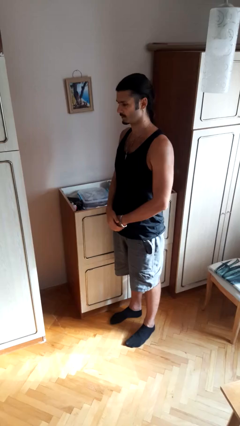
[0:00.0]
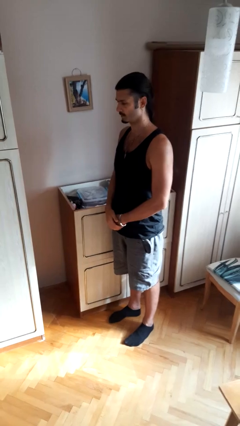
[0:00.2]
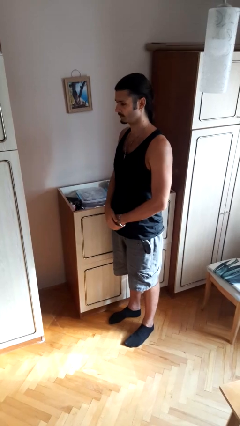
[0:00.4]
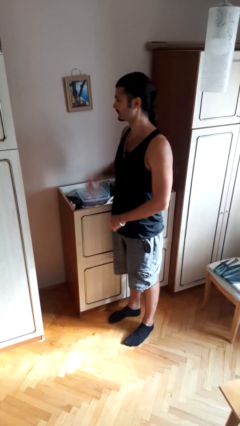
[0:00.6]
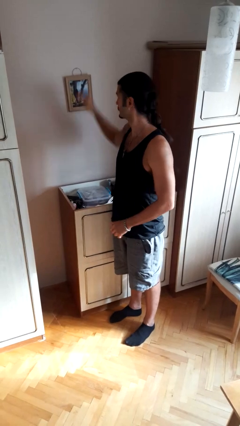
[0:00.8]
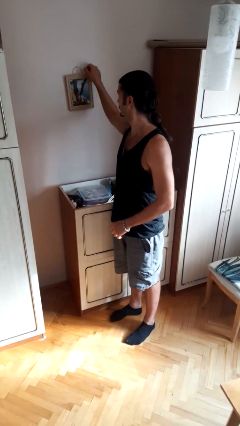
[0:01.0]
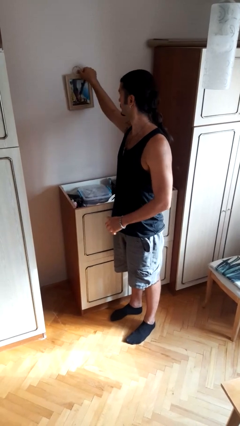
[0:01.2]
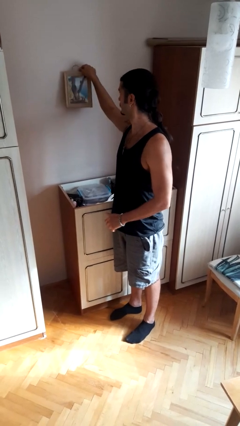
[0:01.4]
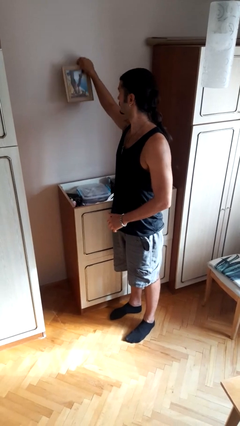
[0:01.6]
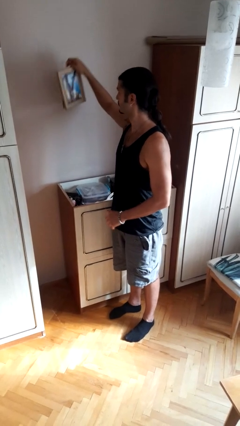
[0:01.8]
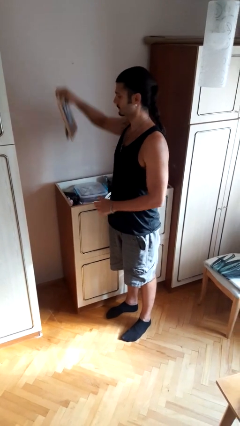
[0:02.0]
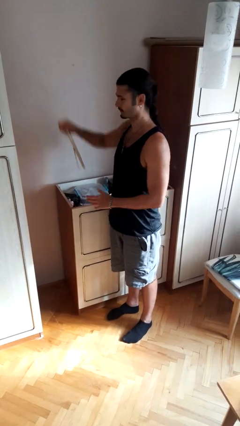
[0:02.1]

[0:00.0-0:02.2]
person takes down picture frame

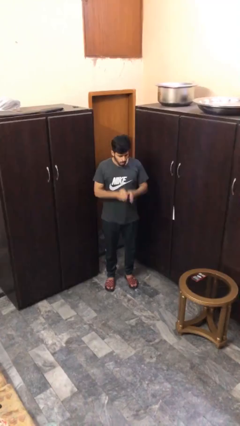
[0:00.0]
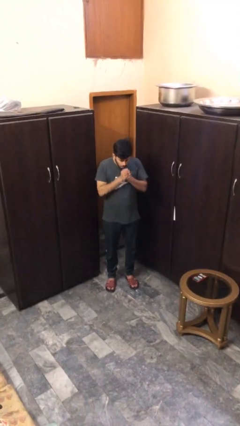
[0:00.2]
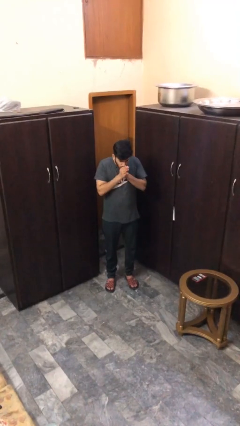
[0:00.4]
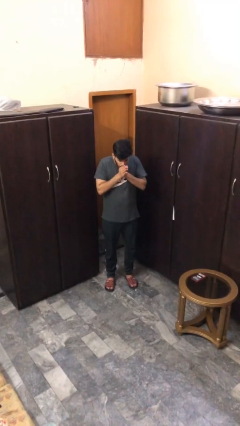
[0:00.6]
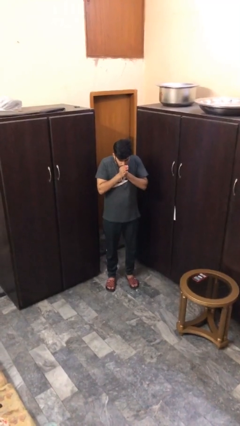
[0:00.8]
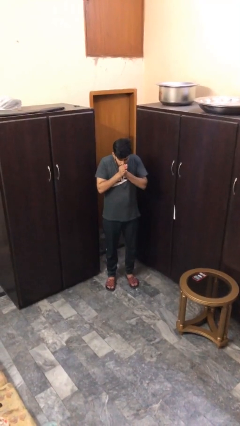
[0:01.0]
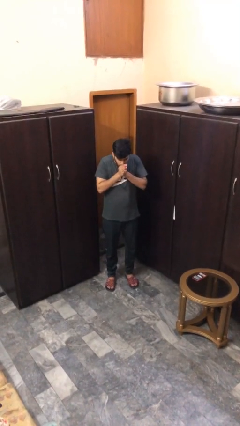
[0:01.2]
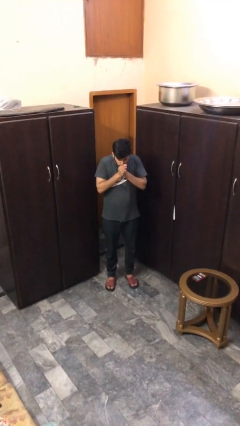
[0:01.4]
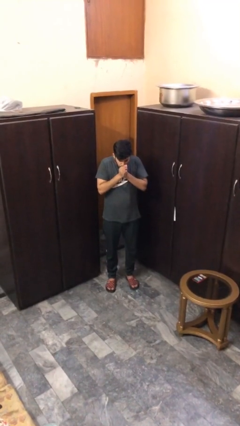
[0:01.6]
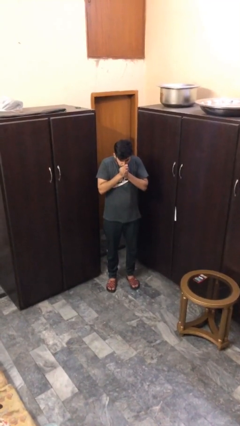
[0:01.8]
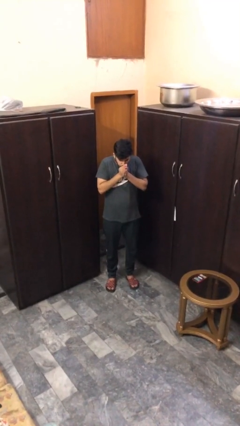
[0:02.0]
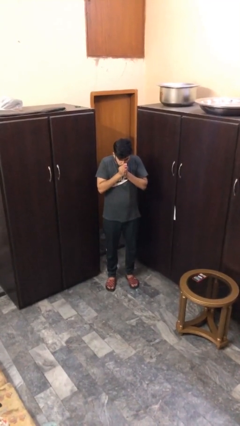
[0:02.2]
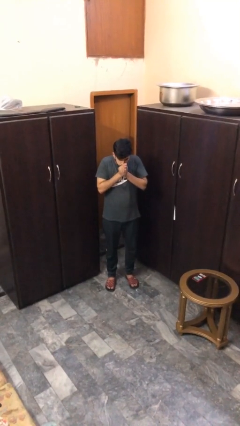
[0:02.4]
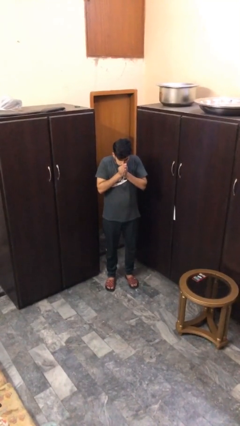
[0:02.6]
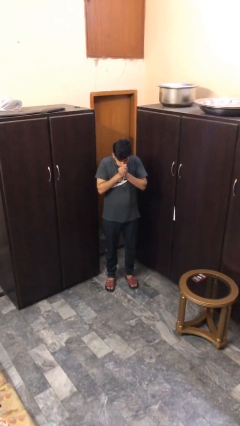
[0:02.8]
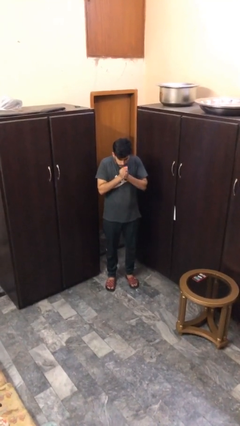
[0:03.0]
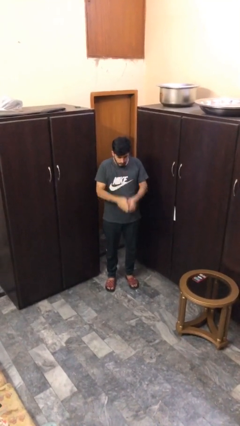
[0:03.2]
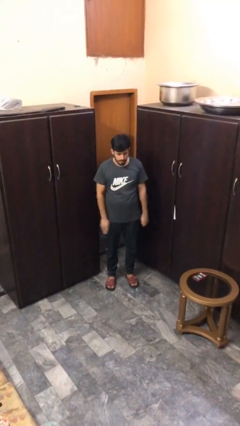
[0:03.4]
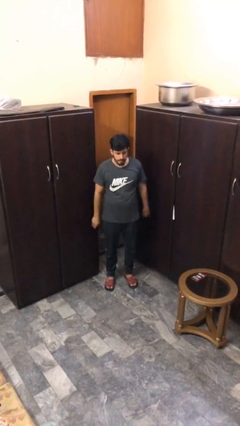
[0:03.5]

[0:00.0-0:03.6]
person blows into hands

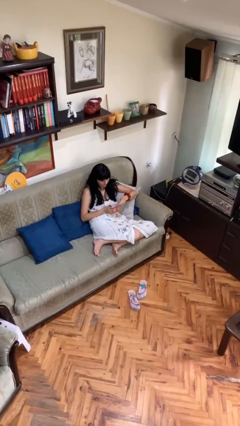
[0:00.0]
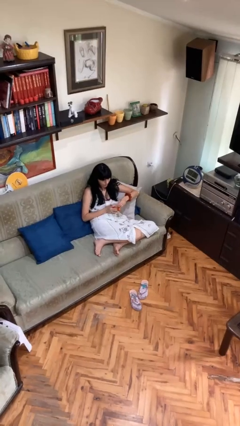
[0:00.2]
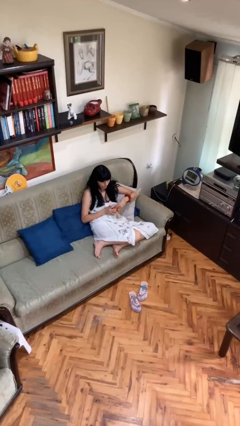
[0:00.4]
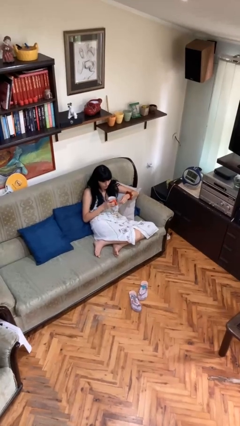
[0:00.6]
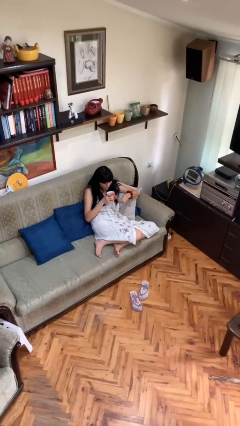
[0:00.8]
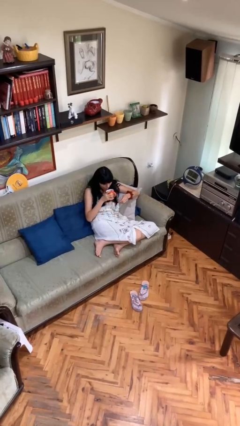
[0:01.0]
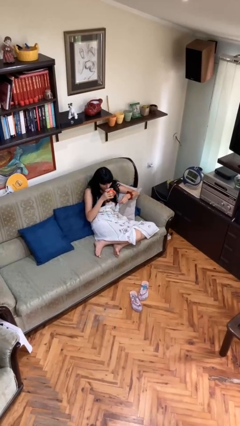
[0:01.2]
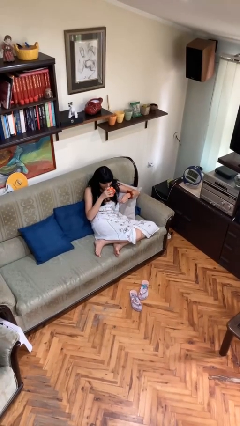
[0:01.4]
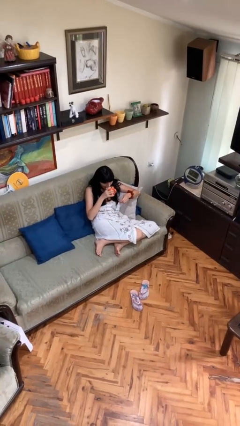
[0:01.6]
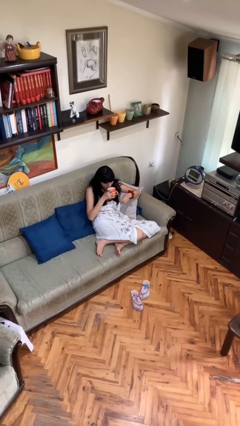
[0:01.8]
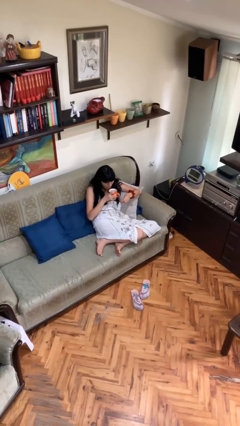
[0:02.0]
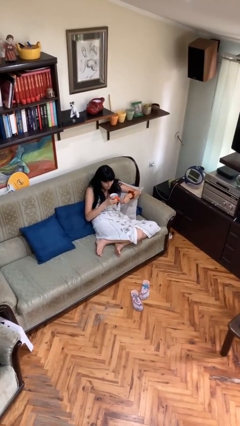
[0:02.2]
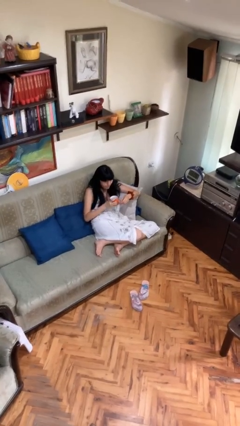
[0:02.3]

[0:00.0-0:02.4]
person drinks from mug

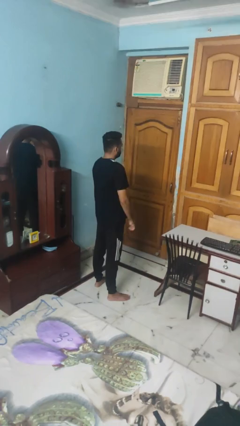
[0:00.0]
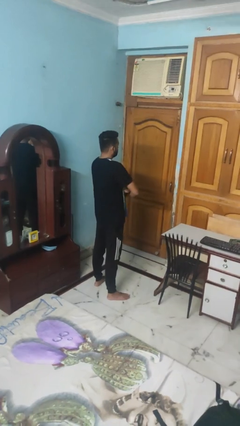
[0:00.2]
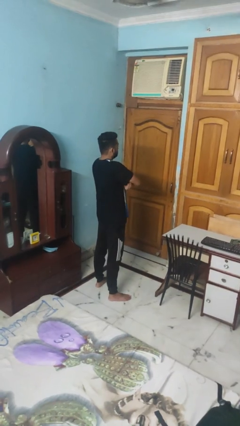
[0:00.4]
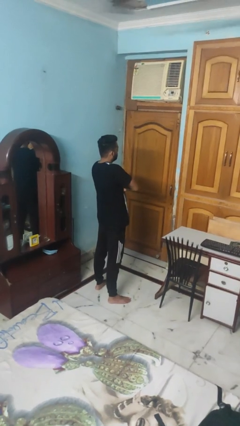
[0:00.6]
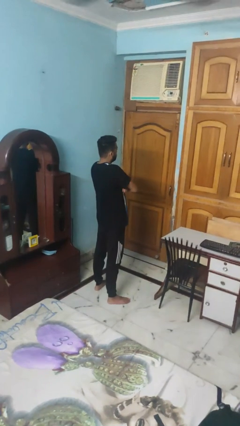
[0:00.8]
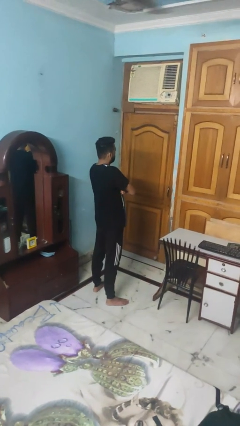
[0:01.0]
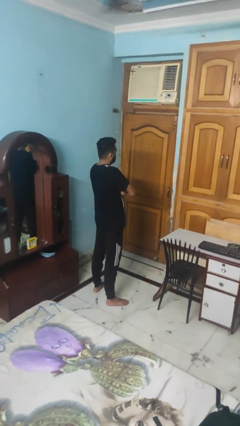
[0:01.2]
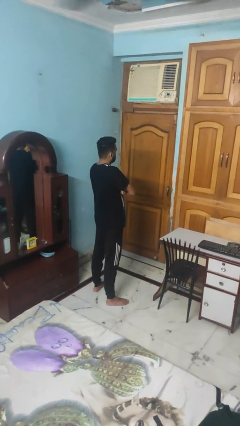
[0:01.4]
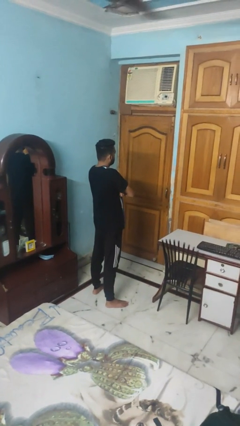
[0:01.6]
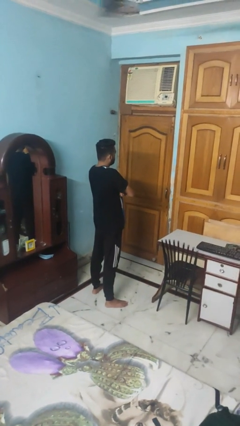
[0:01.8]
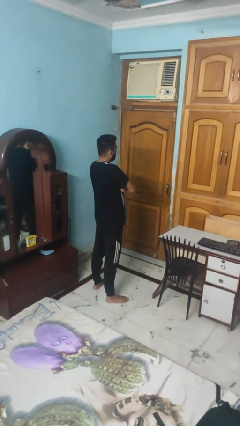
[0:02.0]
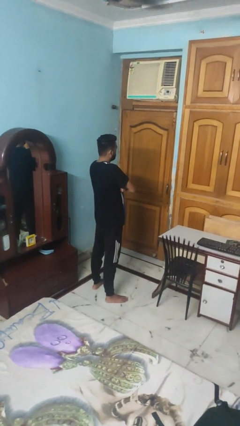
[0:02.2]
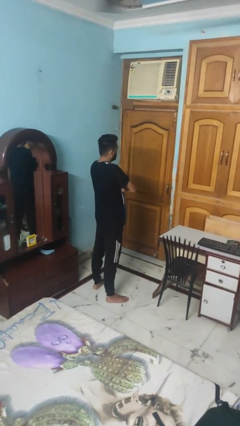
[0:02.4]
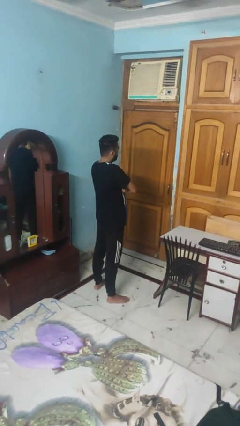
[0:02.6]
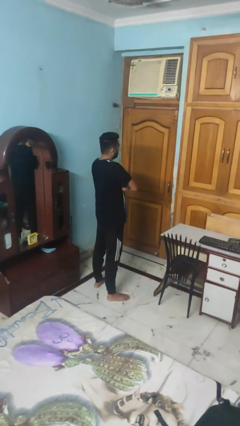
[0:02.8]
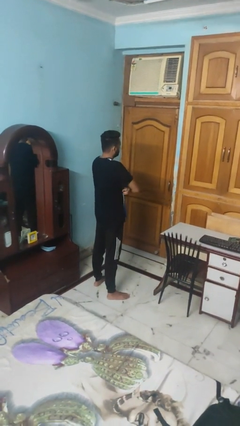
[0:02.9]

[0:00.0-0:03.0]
person crosses arms

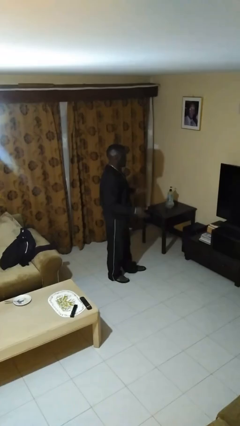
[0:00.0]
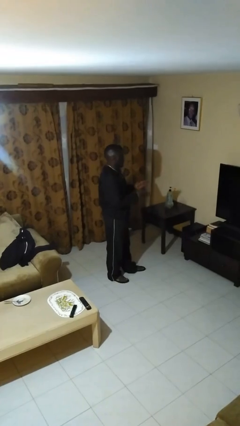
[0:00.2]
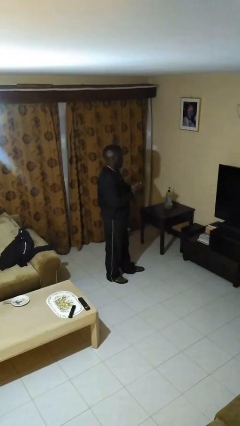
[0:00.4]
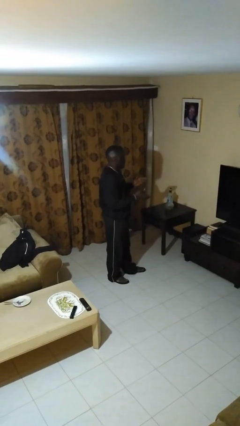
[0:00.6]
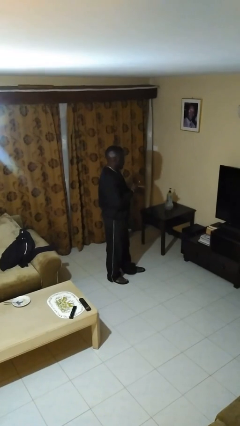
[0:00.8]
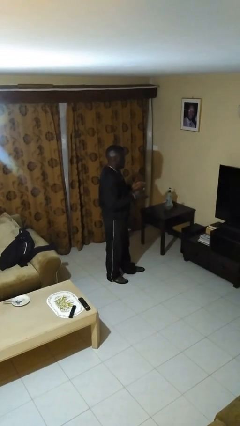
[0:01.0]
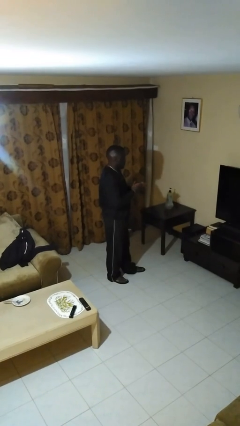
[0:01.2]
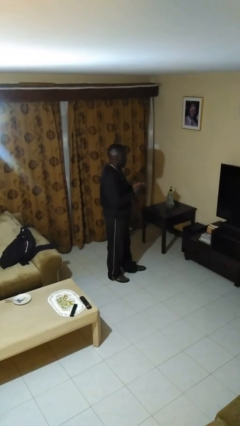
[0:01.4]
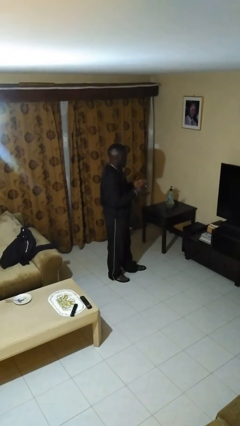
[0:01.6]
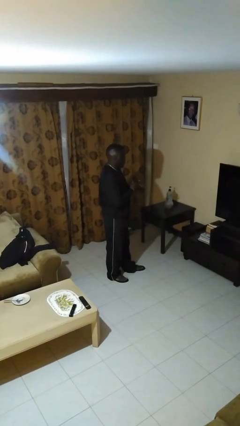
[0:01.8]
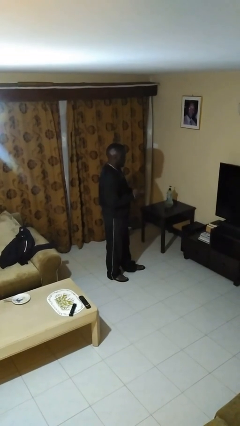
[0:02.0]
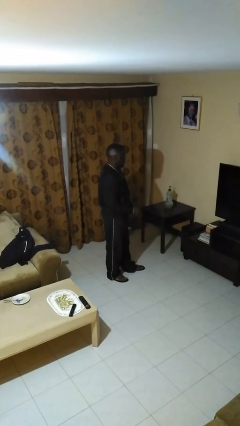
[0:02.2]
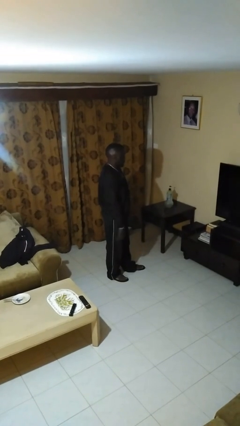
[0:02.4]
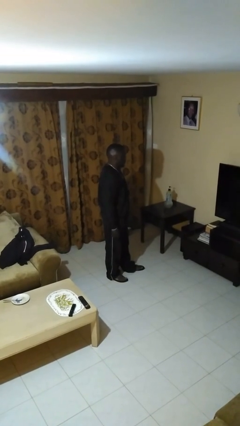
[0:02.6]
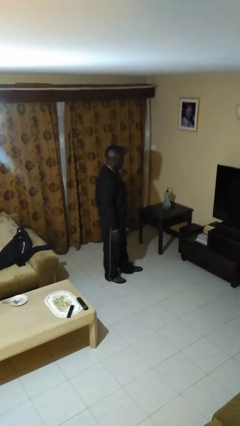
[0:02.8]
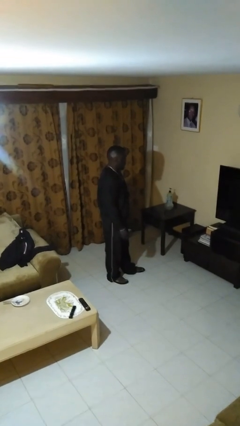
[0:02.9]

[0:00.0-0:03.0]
person claps hands

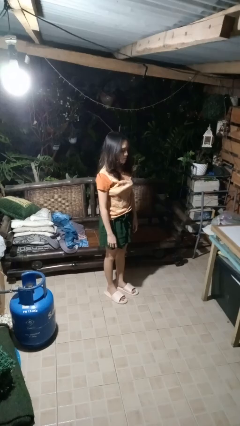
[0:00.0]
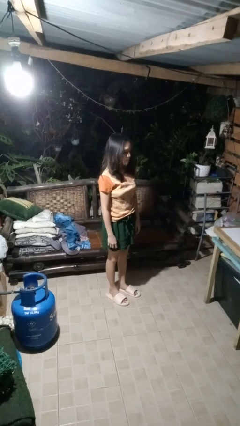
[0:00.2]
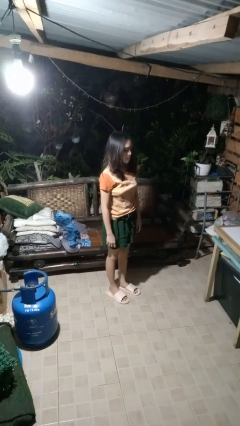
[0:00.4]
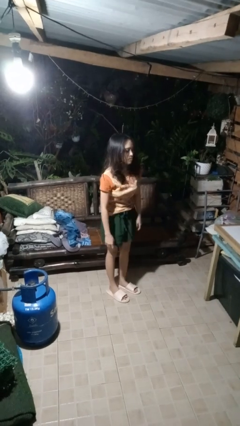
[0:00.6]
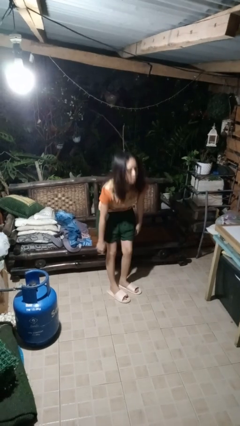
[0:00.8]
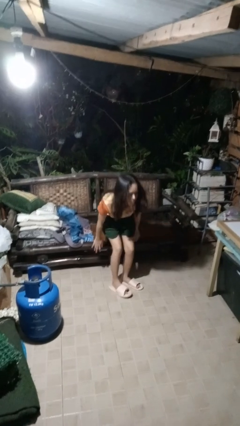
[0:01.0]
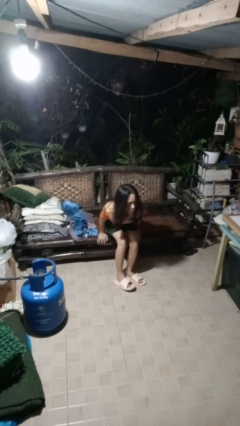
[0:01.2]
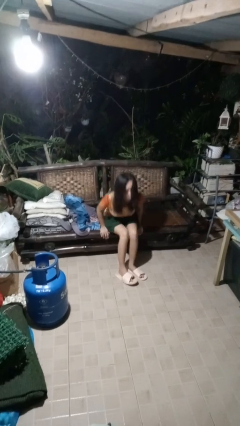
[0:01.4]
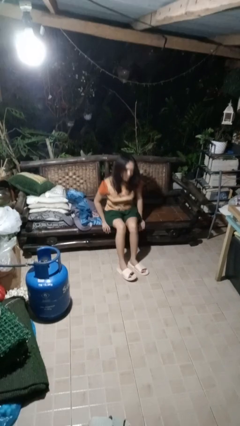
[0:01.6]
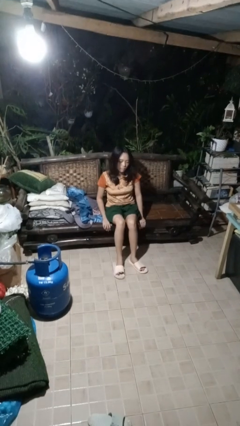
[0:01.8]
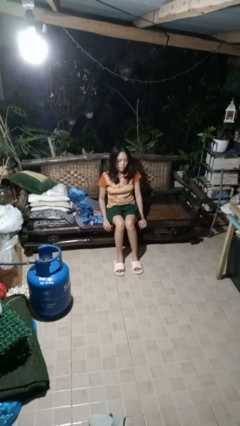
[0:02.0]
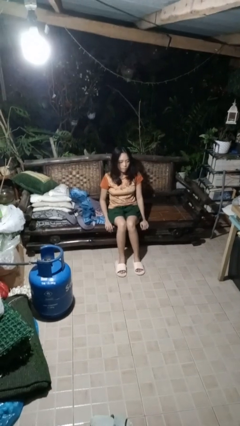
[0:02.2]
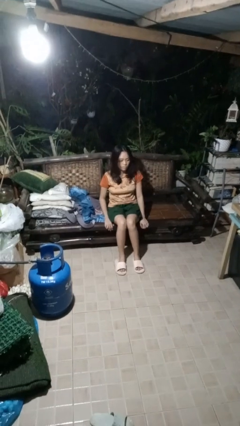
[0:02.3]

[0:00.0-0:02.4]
person sits down

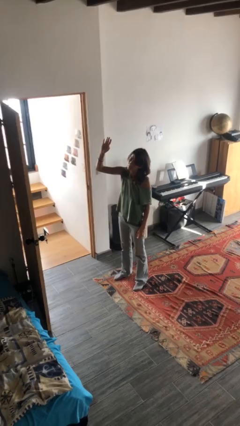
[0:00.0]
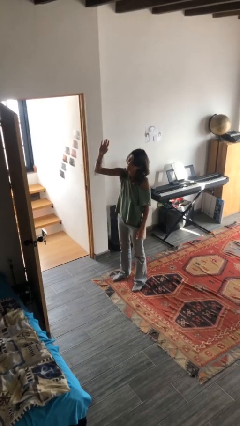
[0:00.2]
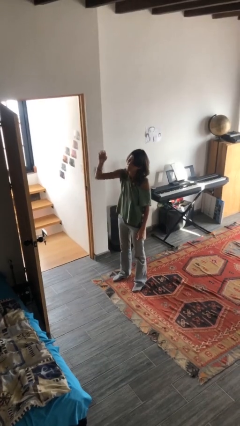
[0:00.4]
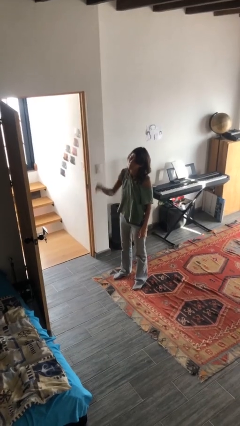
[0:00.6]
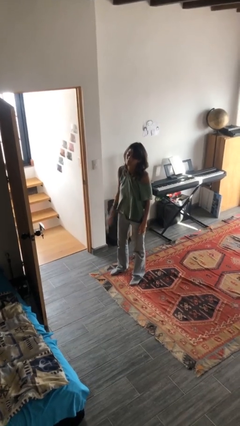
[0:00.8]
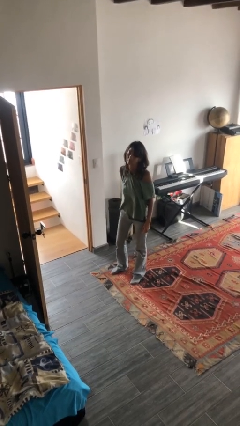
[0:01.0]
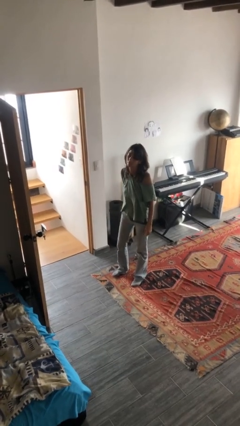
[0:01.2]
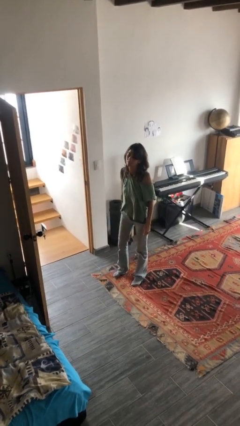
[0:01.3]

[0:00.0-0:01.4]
person gestures lower hand
